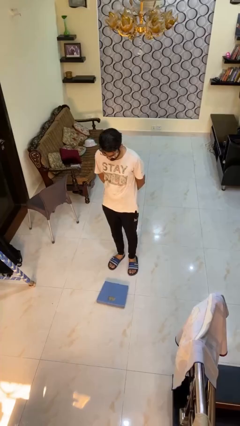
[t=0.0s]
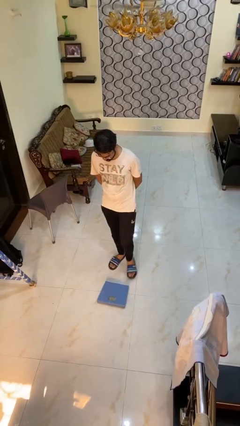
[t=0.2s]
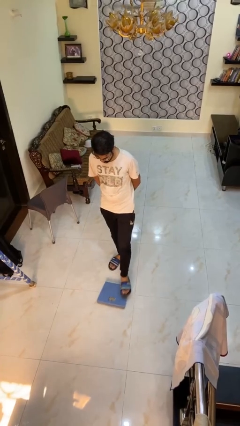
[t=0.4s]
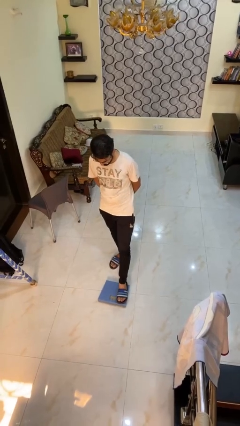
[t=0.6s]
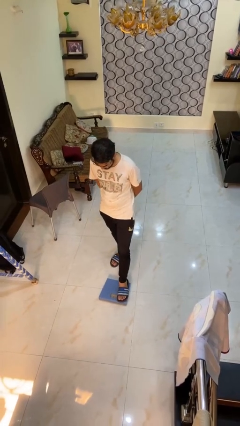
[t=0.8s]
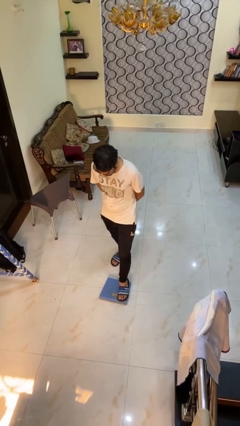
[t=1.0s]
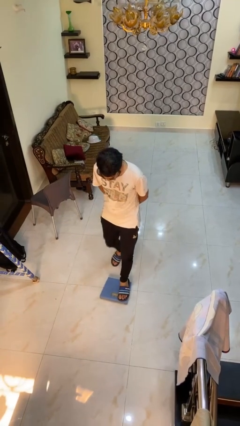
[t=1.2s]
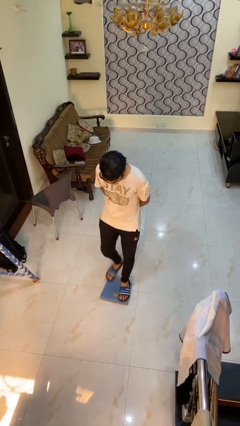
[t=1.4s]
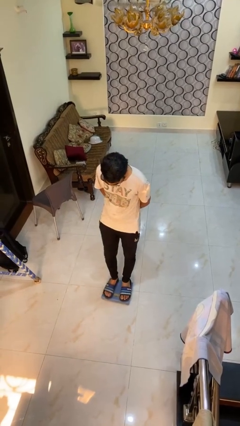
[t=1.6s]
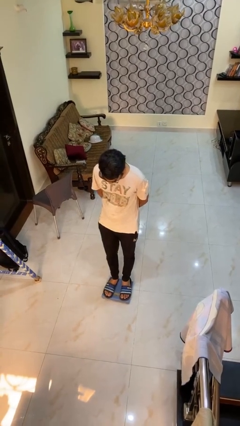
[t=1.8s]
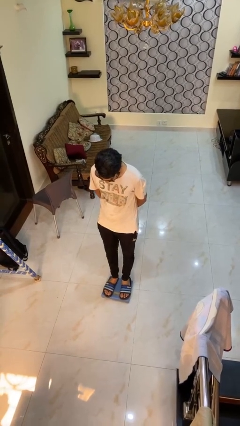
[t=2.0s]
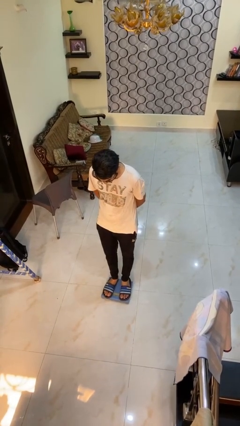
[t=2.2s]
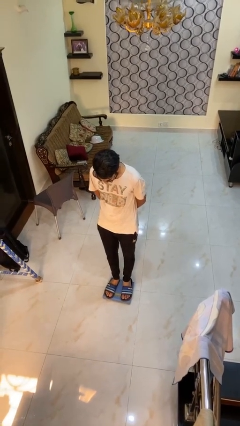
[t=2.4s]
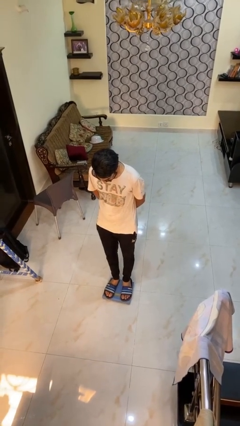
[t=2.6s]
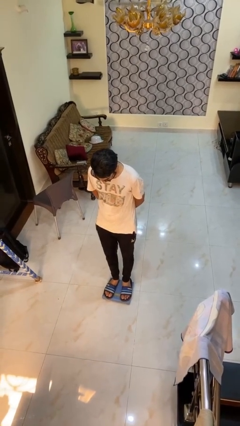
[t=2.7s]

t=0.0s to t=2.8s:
person uses bodyweight scale

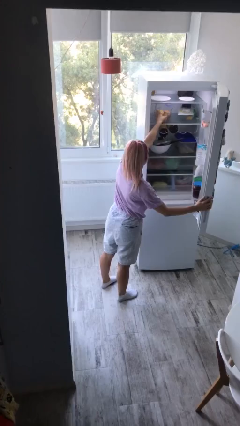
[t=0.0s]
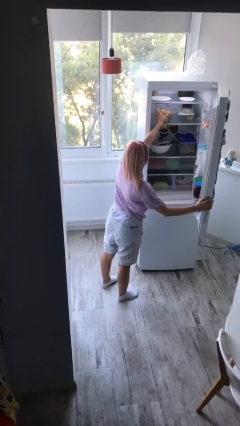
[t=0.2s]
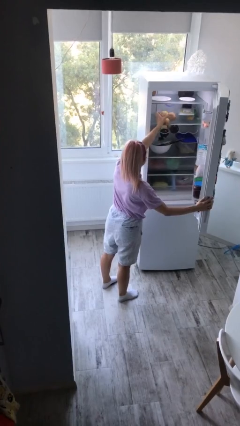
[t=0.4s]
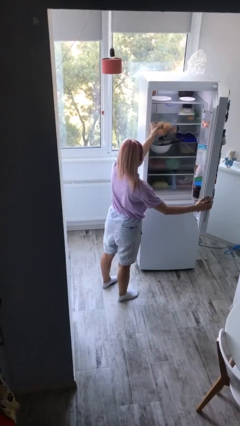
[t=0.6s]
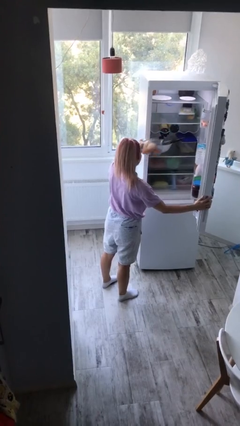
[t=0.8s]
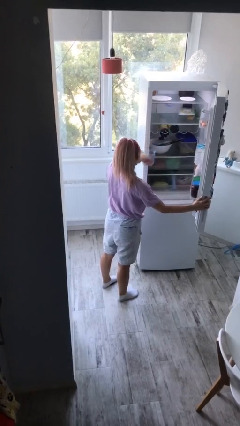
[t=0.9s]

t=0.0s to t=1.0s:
person takes object from refrigerator

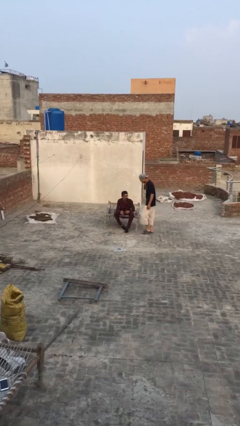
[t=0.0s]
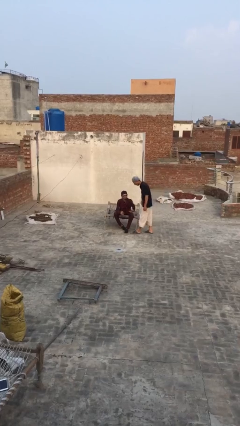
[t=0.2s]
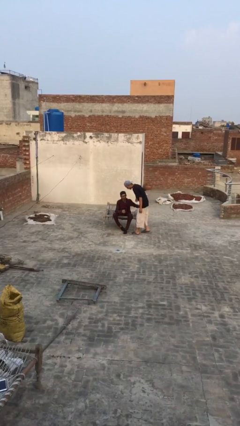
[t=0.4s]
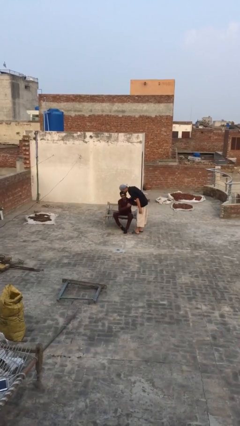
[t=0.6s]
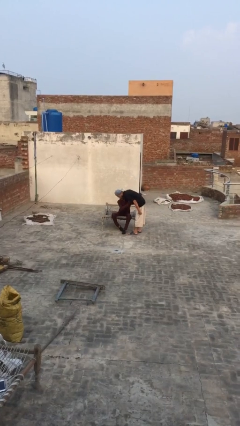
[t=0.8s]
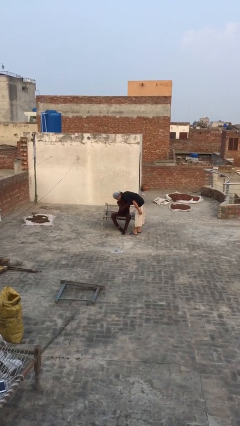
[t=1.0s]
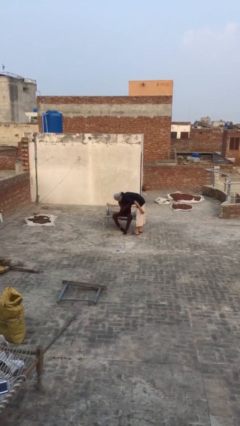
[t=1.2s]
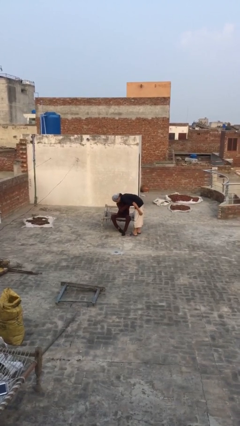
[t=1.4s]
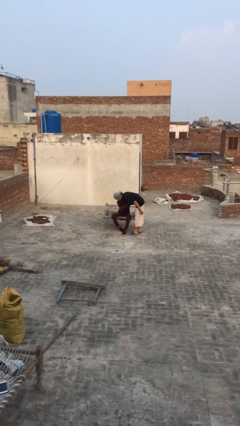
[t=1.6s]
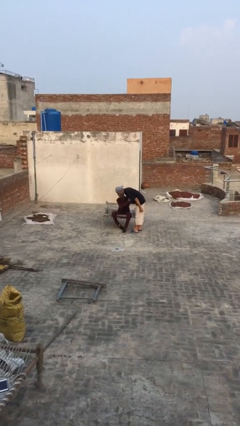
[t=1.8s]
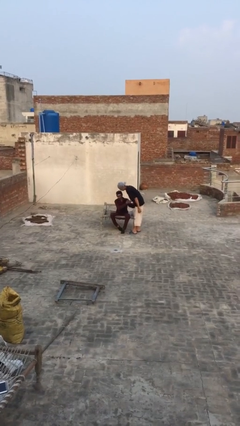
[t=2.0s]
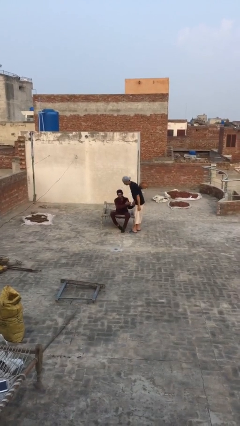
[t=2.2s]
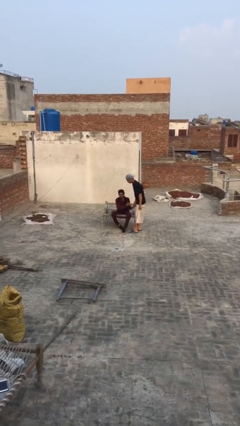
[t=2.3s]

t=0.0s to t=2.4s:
person embraces person

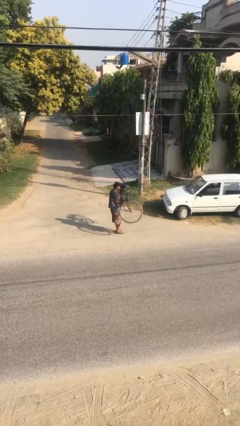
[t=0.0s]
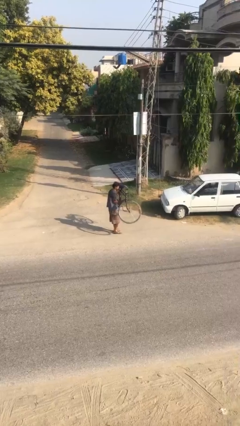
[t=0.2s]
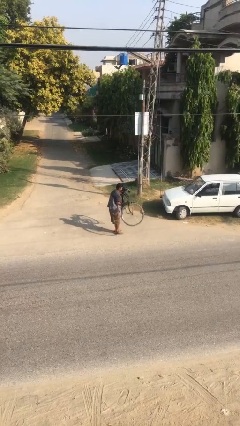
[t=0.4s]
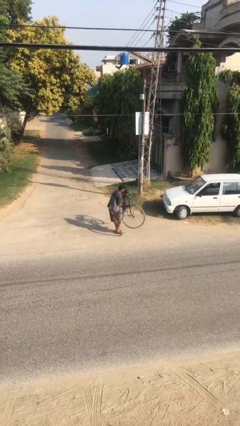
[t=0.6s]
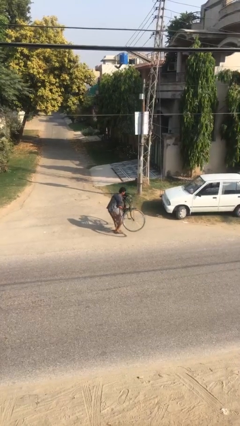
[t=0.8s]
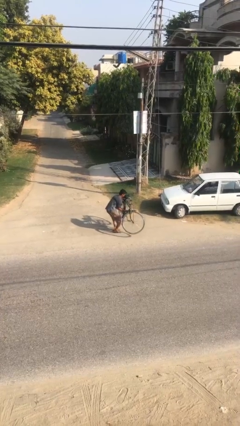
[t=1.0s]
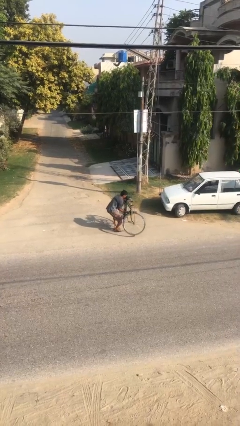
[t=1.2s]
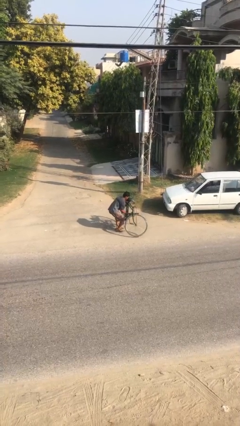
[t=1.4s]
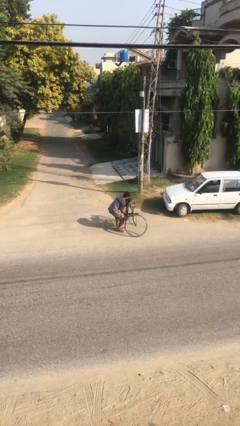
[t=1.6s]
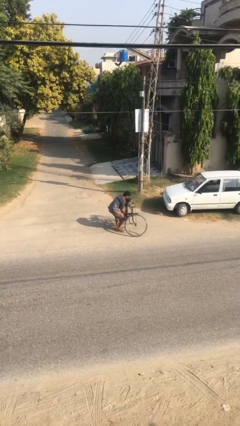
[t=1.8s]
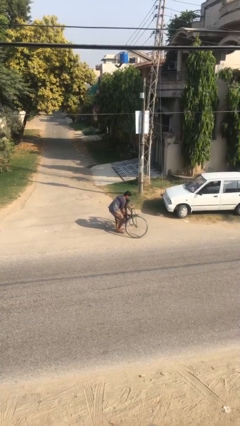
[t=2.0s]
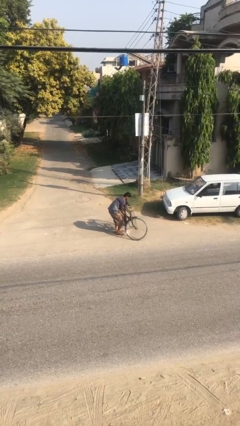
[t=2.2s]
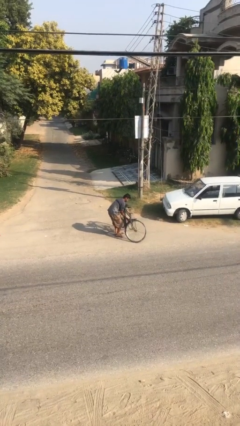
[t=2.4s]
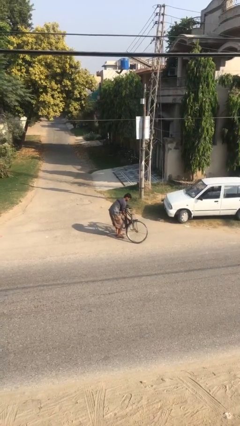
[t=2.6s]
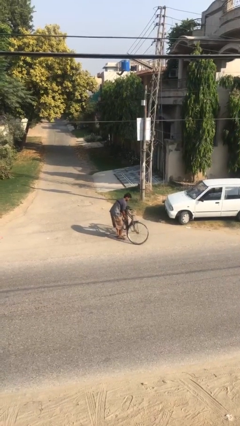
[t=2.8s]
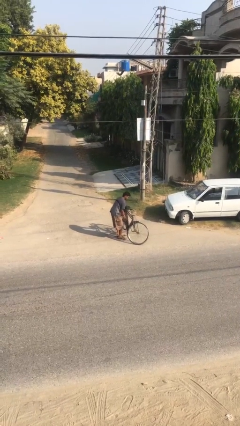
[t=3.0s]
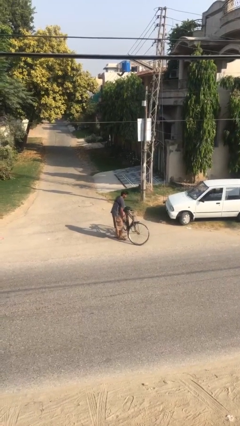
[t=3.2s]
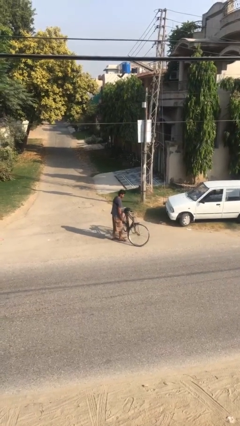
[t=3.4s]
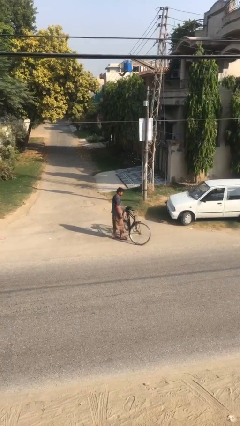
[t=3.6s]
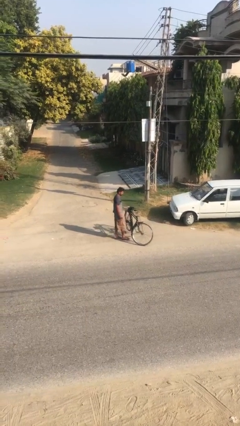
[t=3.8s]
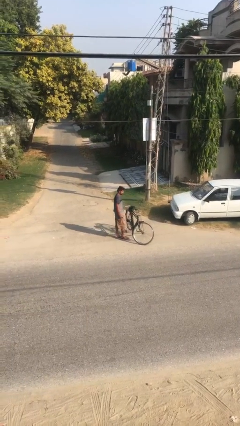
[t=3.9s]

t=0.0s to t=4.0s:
person puts down object on floor

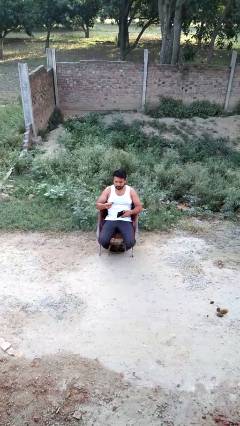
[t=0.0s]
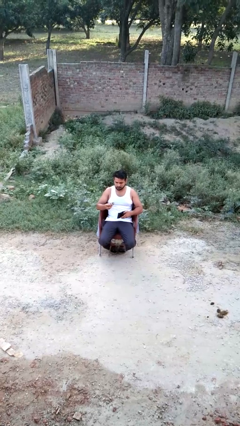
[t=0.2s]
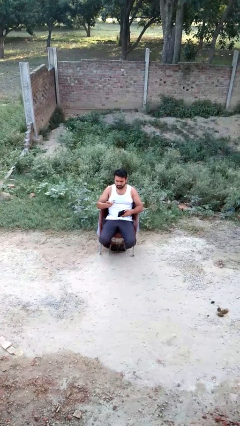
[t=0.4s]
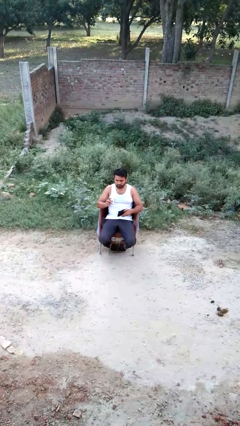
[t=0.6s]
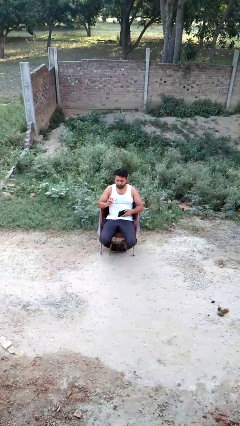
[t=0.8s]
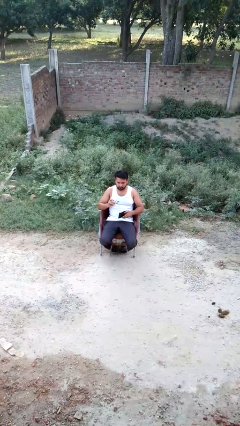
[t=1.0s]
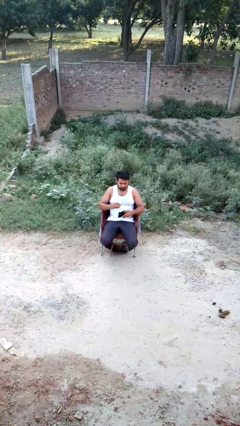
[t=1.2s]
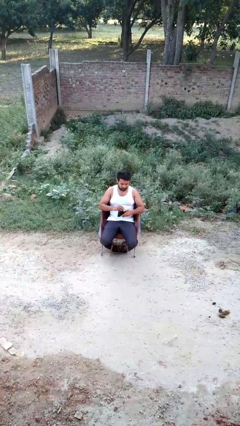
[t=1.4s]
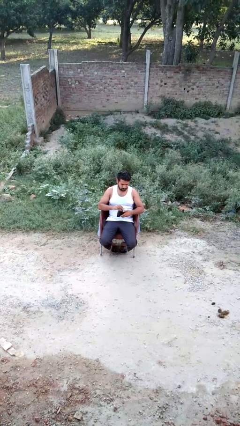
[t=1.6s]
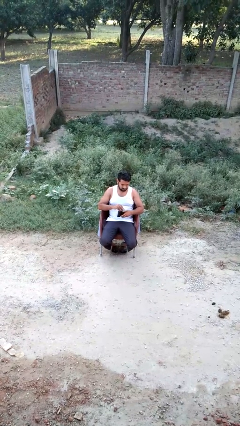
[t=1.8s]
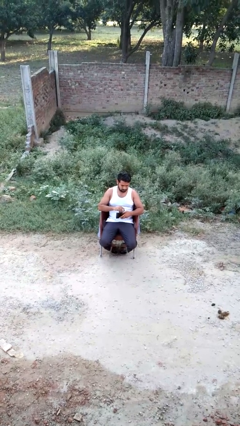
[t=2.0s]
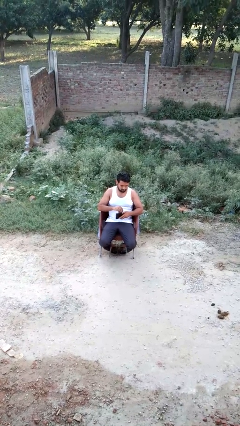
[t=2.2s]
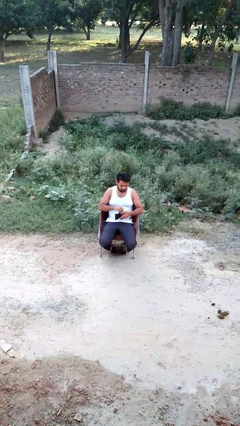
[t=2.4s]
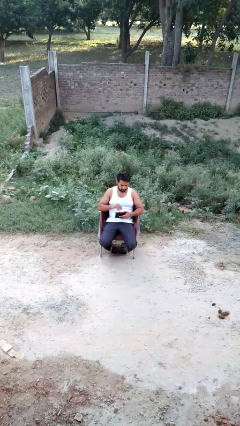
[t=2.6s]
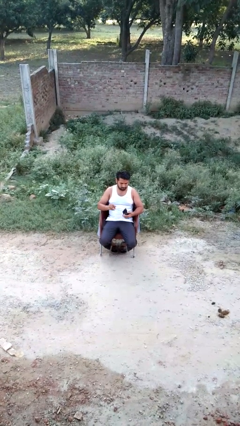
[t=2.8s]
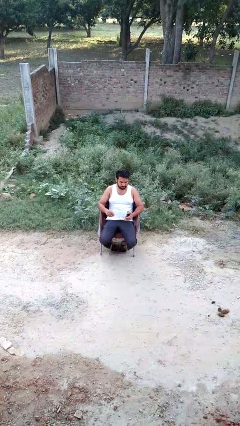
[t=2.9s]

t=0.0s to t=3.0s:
person puts object into purse

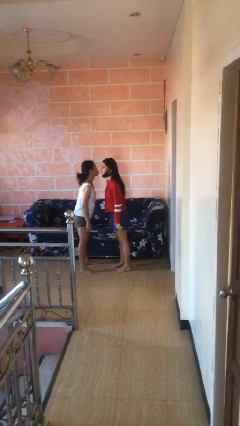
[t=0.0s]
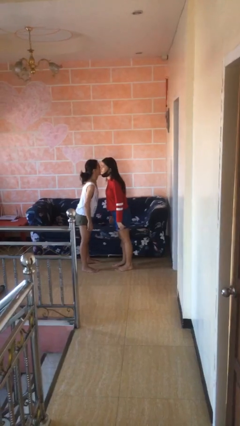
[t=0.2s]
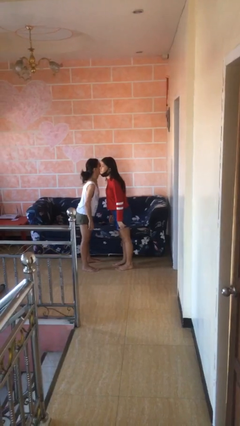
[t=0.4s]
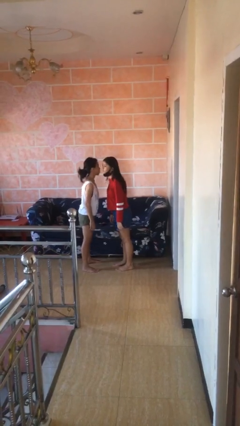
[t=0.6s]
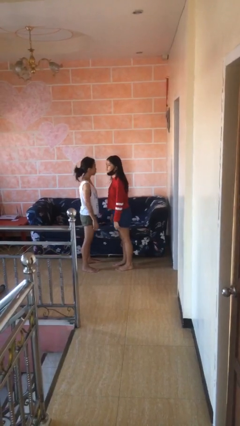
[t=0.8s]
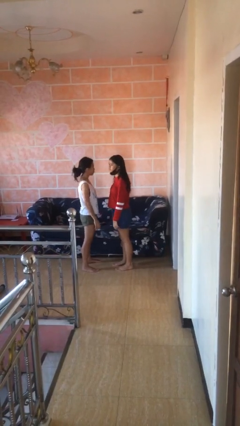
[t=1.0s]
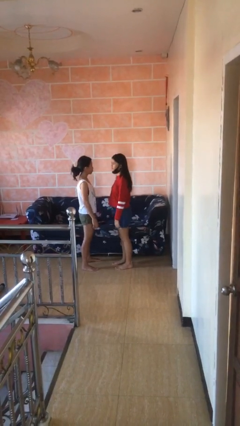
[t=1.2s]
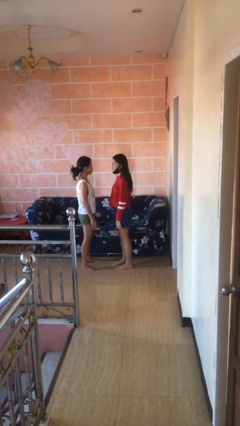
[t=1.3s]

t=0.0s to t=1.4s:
person kisses cheek of person

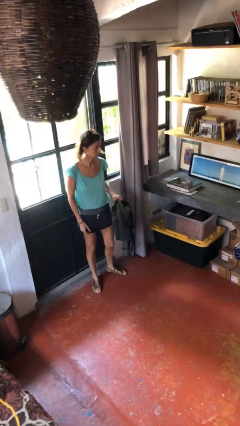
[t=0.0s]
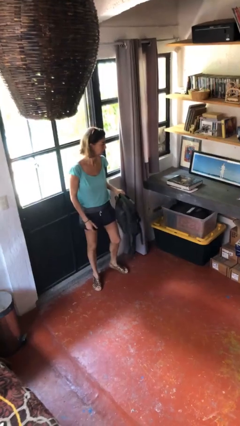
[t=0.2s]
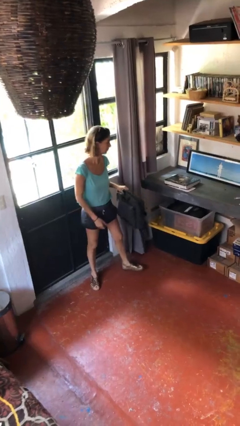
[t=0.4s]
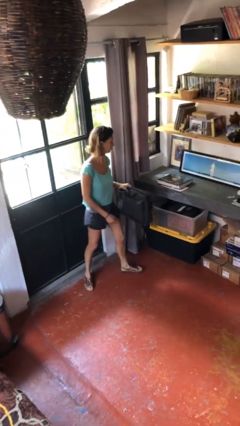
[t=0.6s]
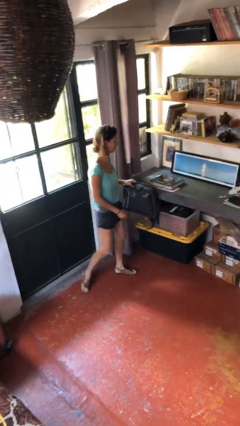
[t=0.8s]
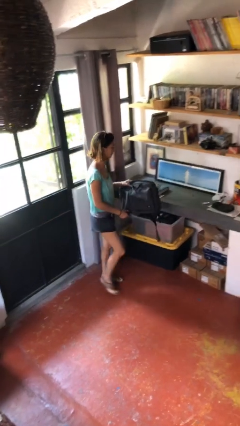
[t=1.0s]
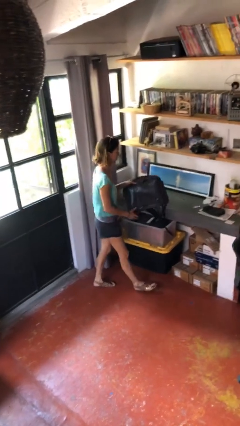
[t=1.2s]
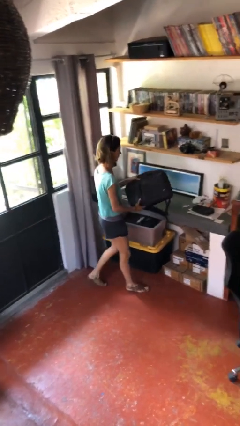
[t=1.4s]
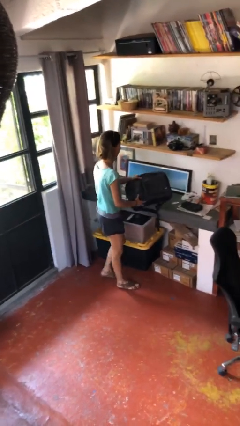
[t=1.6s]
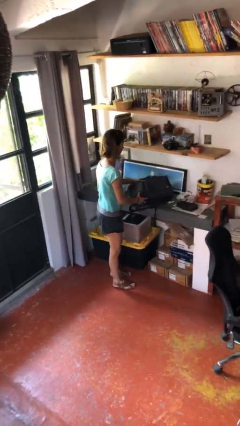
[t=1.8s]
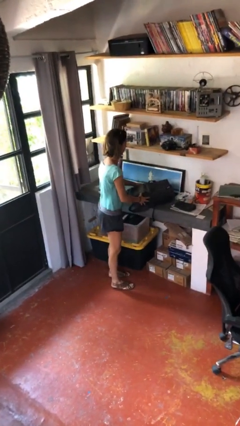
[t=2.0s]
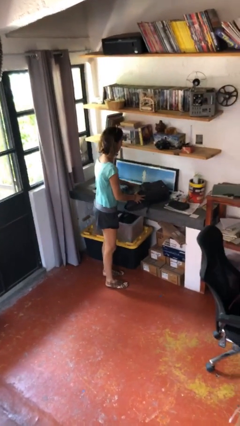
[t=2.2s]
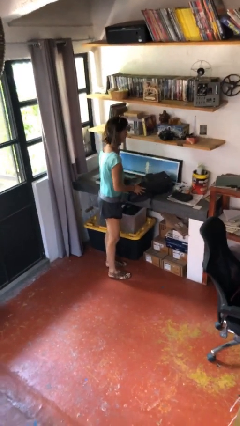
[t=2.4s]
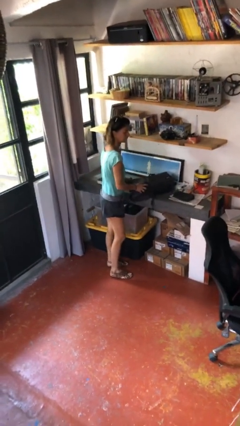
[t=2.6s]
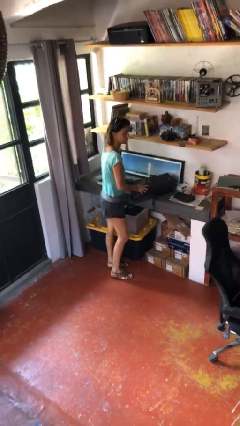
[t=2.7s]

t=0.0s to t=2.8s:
person puts down object on table
